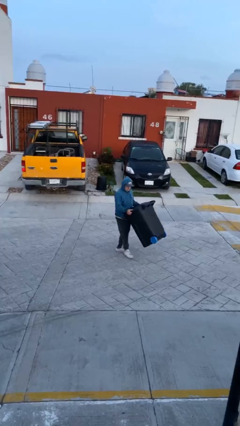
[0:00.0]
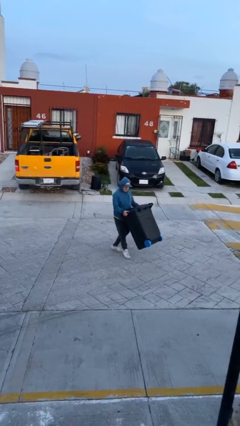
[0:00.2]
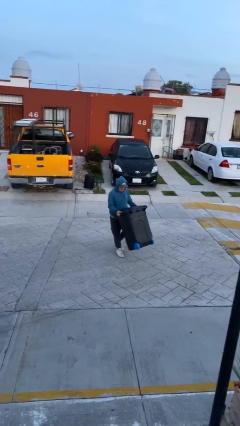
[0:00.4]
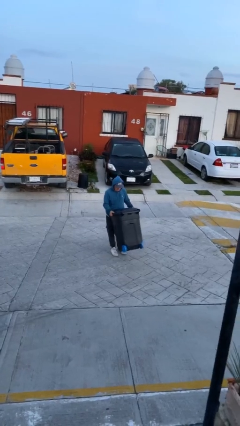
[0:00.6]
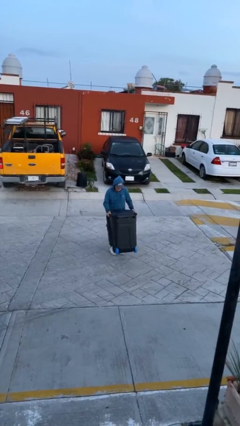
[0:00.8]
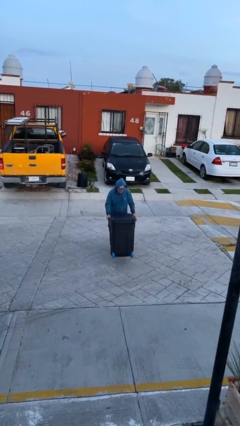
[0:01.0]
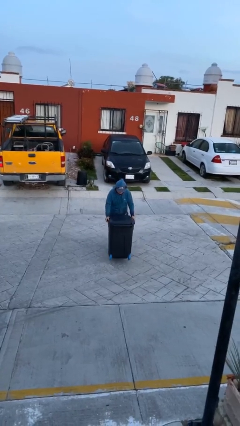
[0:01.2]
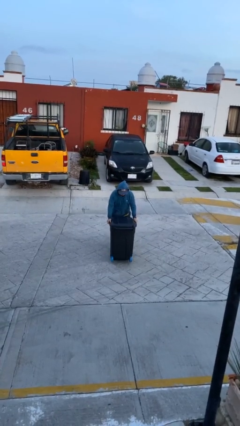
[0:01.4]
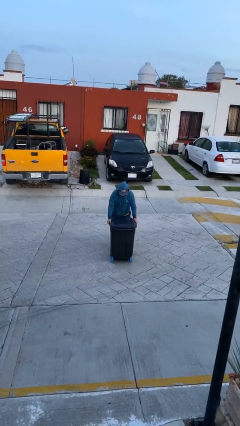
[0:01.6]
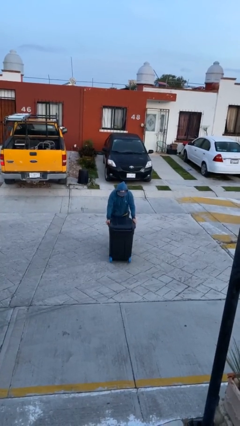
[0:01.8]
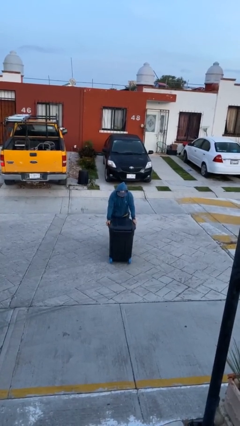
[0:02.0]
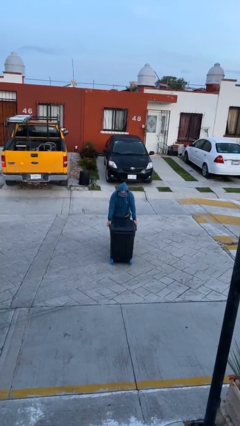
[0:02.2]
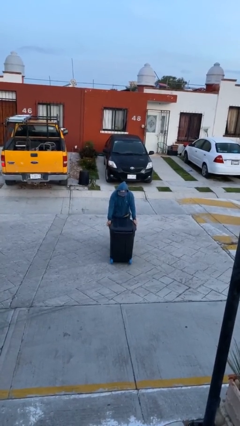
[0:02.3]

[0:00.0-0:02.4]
person puts down object on floor

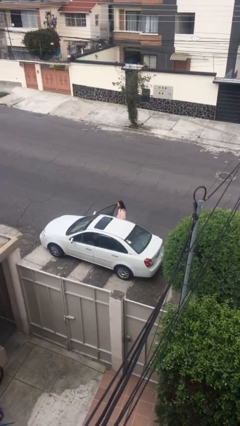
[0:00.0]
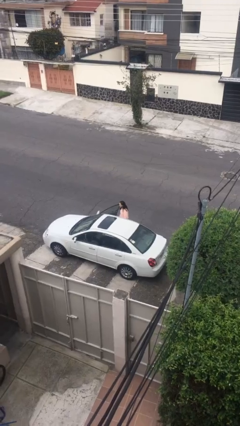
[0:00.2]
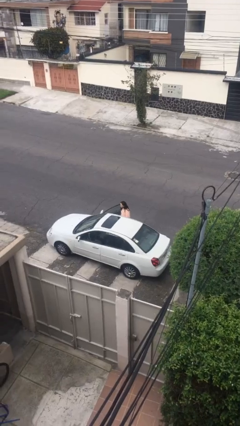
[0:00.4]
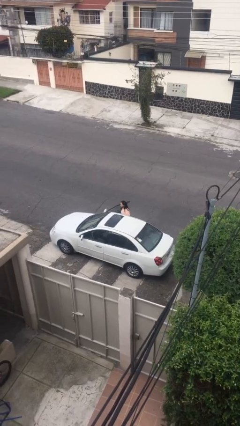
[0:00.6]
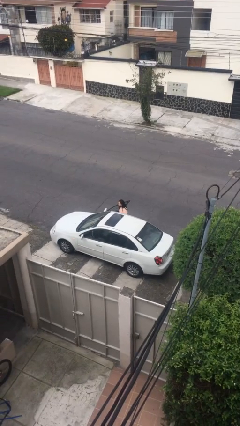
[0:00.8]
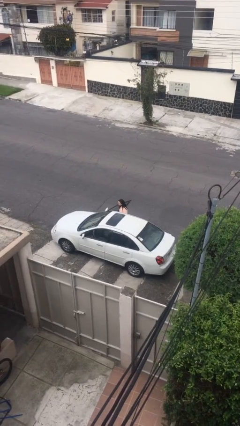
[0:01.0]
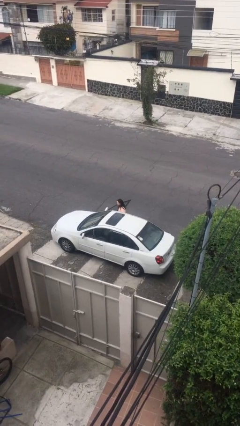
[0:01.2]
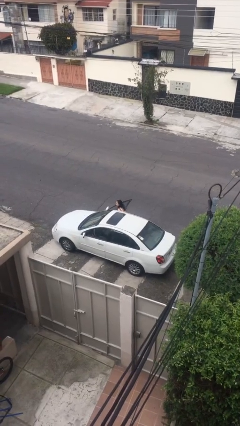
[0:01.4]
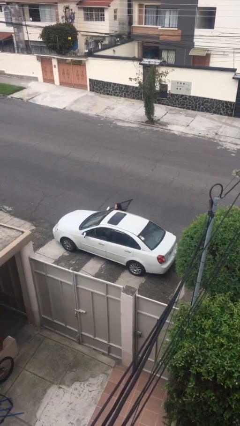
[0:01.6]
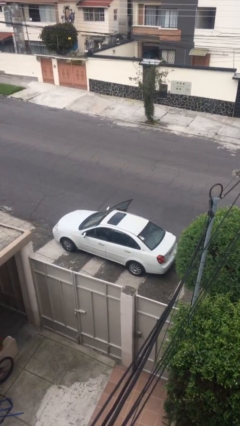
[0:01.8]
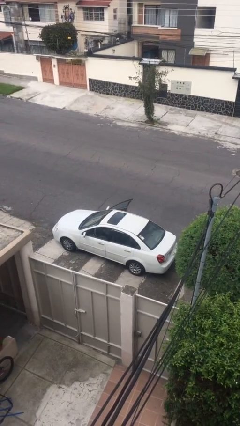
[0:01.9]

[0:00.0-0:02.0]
person enters car

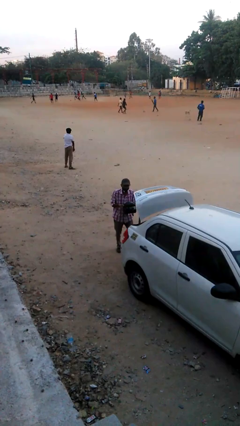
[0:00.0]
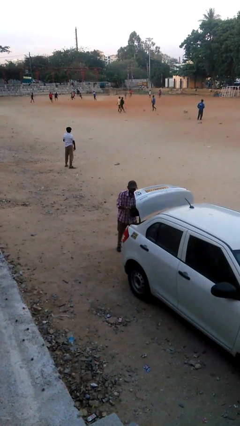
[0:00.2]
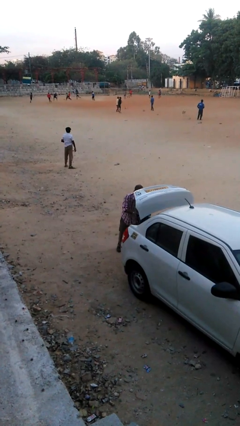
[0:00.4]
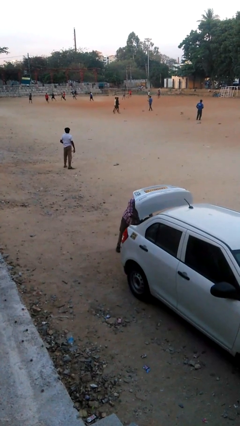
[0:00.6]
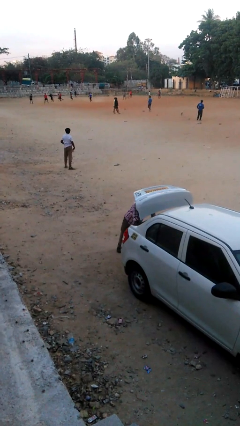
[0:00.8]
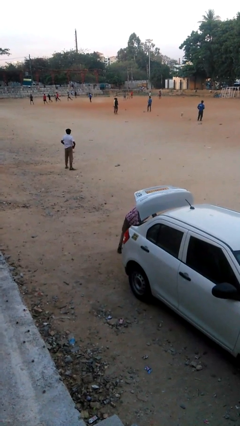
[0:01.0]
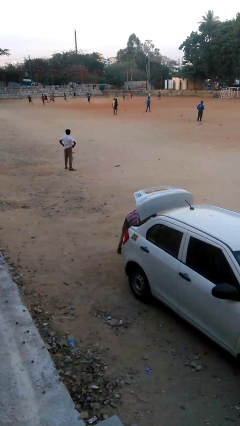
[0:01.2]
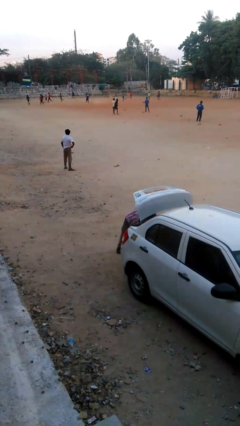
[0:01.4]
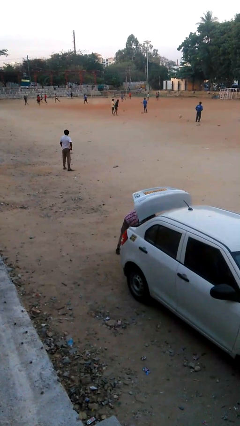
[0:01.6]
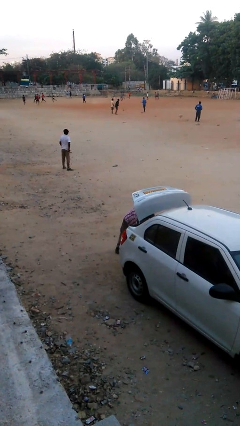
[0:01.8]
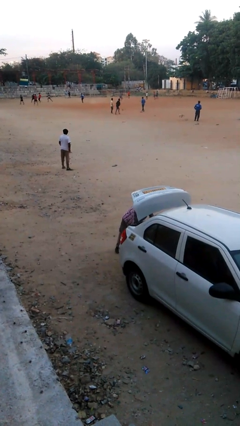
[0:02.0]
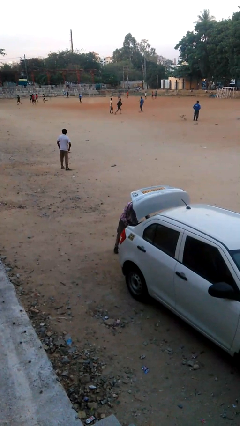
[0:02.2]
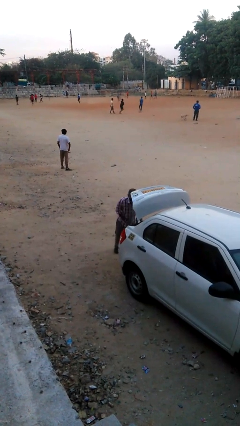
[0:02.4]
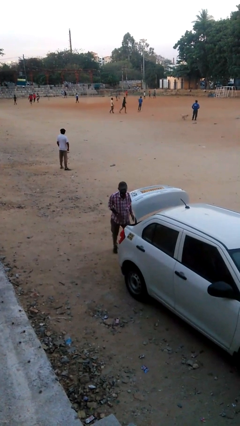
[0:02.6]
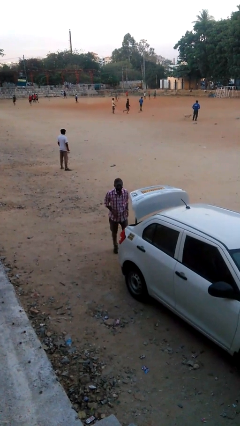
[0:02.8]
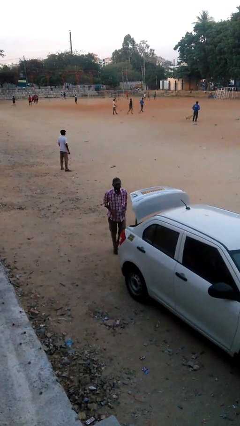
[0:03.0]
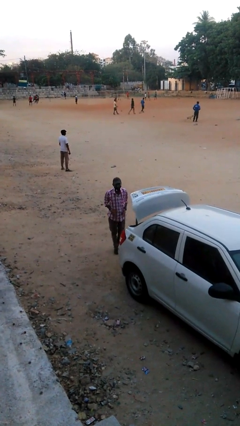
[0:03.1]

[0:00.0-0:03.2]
person loads car

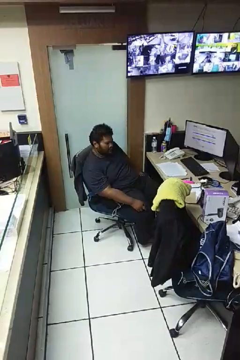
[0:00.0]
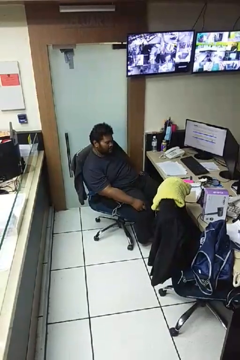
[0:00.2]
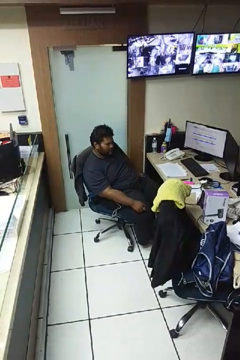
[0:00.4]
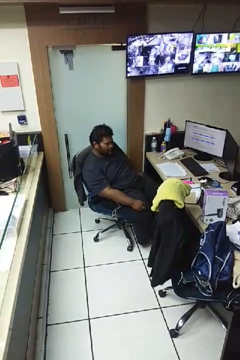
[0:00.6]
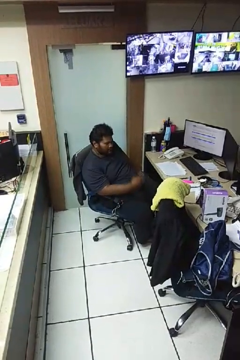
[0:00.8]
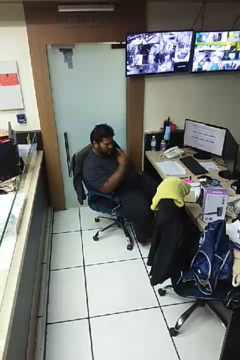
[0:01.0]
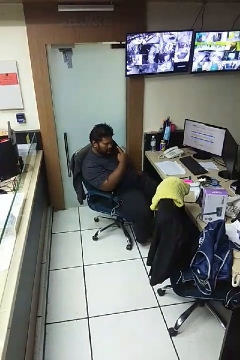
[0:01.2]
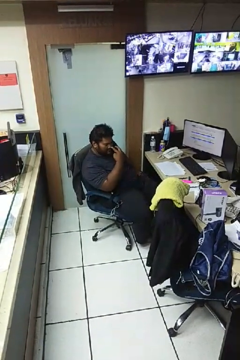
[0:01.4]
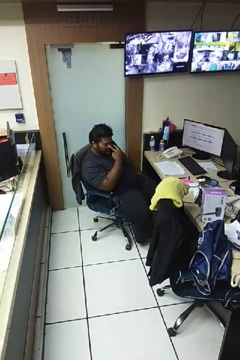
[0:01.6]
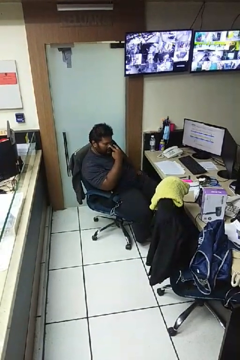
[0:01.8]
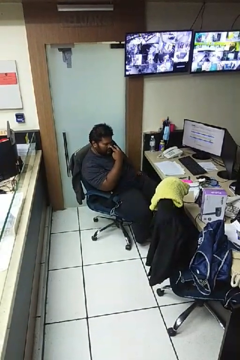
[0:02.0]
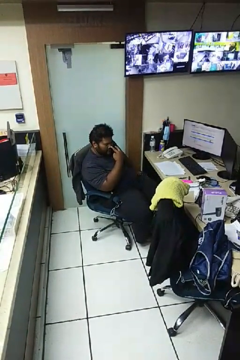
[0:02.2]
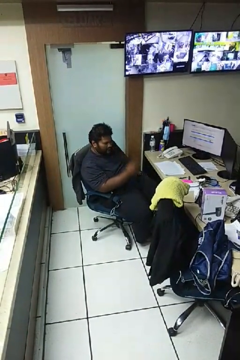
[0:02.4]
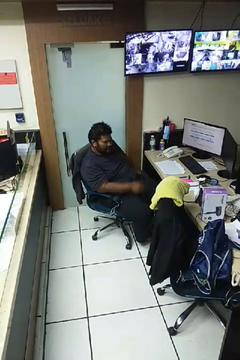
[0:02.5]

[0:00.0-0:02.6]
person gestures watch closely

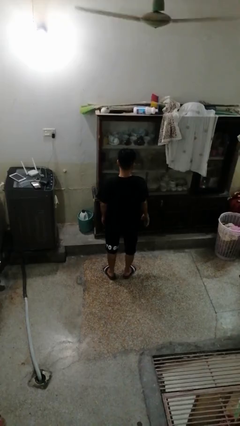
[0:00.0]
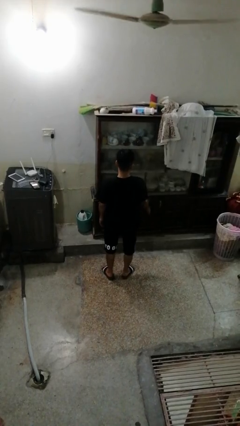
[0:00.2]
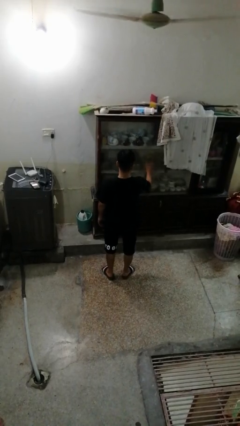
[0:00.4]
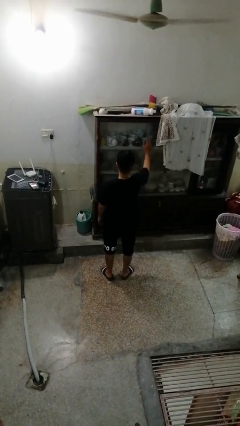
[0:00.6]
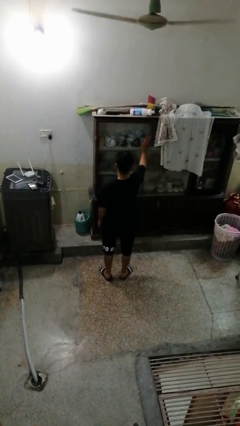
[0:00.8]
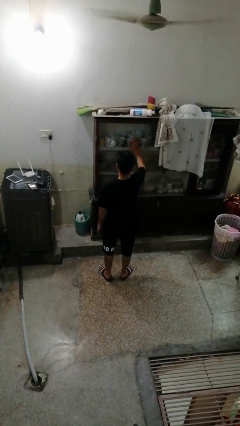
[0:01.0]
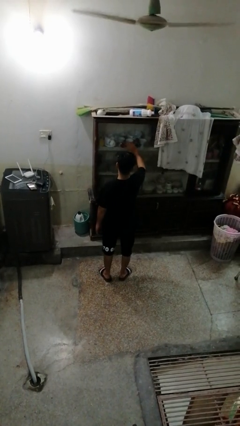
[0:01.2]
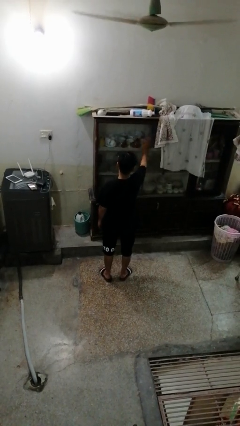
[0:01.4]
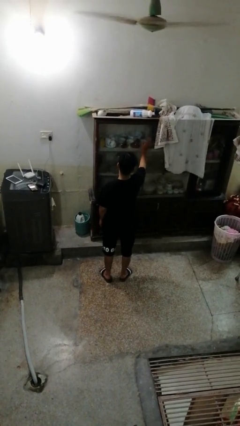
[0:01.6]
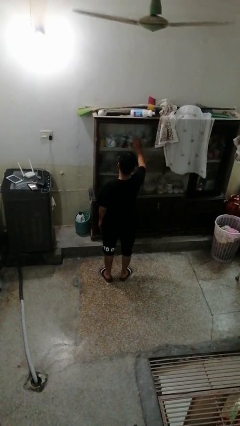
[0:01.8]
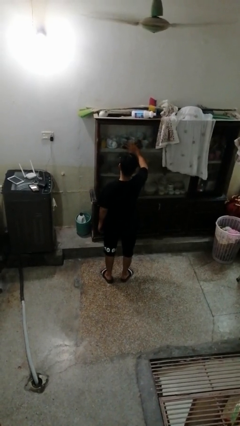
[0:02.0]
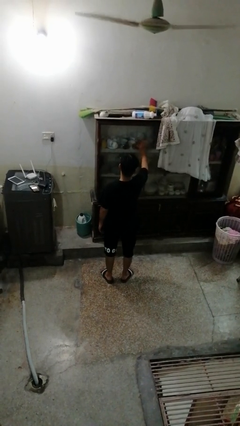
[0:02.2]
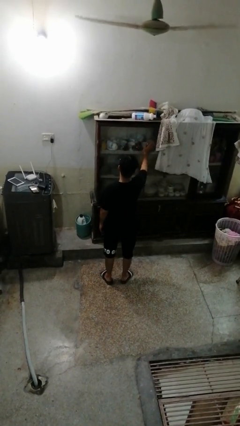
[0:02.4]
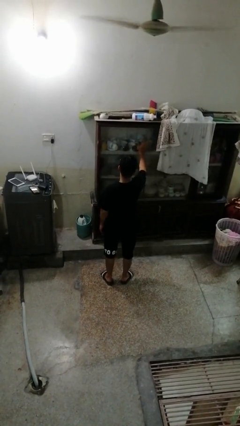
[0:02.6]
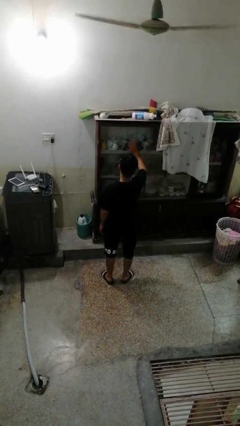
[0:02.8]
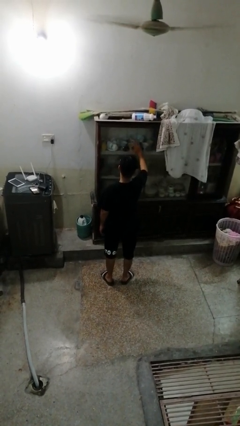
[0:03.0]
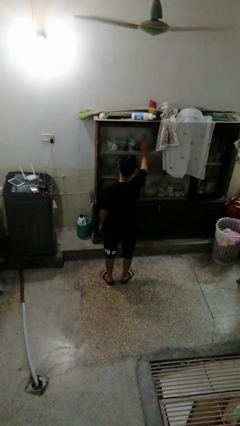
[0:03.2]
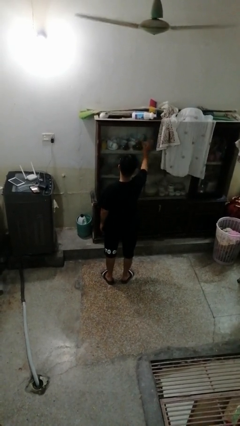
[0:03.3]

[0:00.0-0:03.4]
person waves hand over object

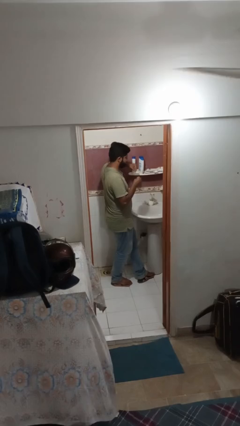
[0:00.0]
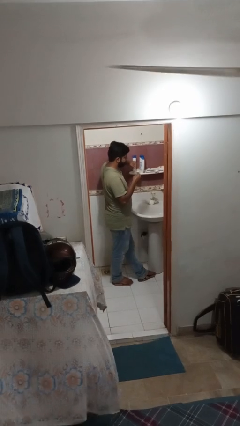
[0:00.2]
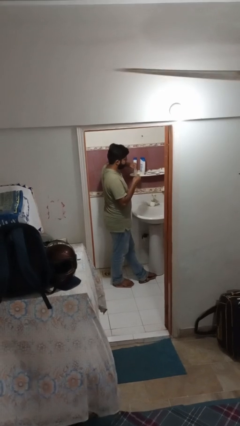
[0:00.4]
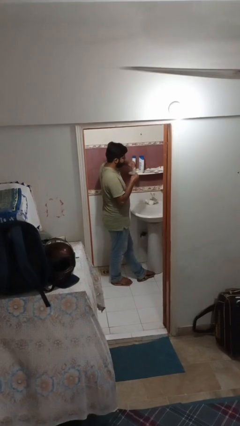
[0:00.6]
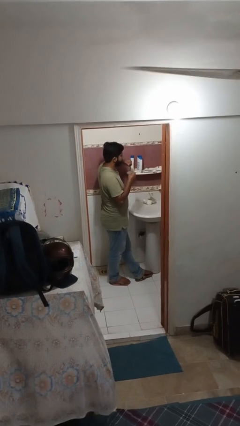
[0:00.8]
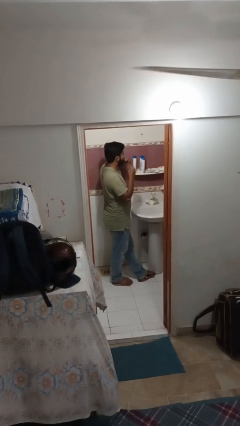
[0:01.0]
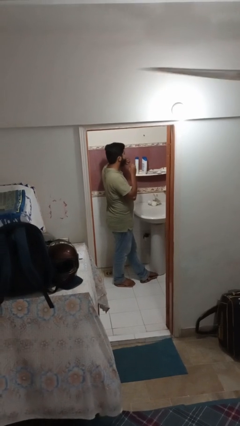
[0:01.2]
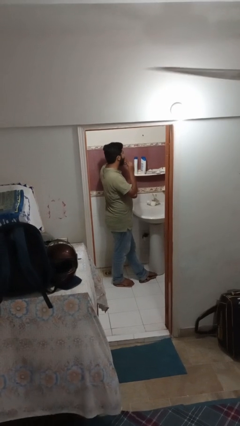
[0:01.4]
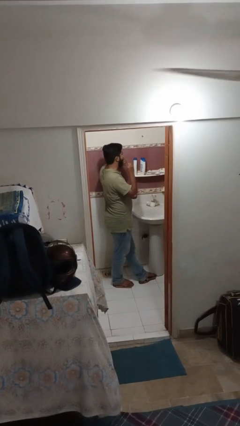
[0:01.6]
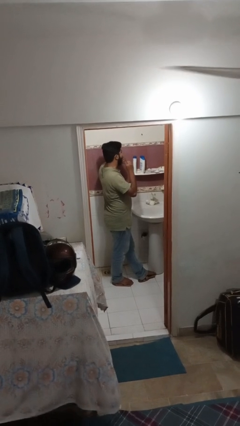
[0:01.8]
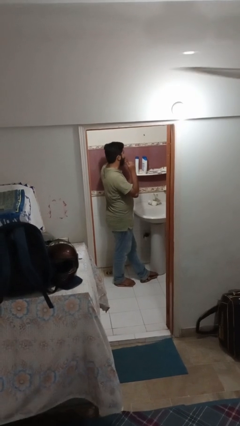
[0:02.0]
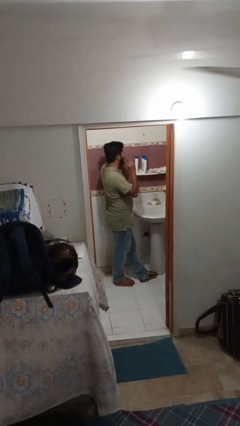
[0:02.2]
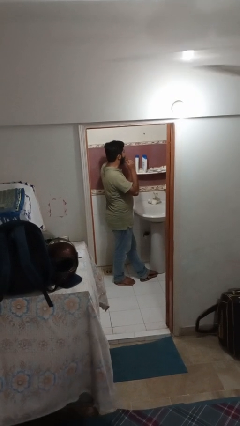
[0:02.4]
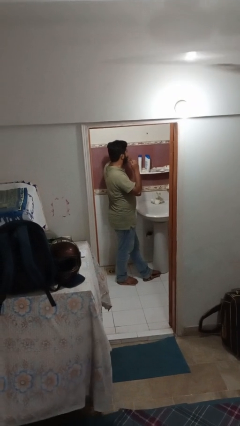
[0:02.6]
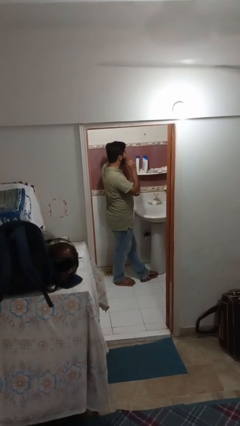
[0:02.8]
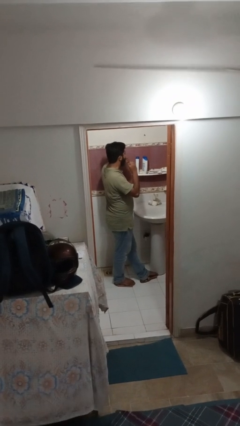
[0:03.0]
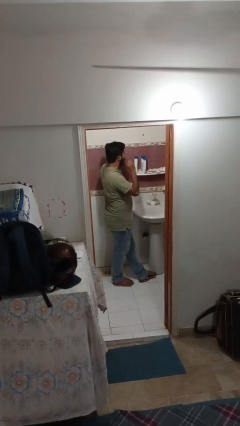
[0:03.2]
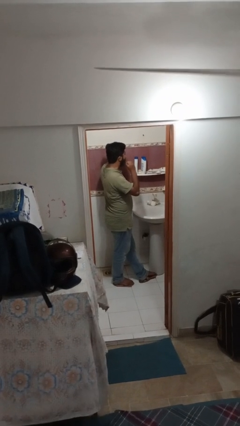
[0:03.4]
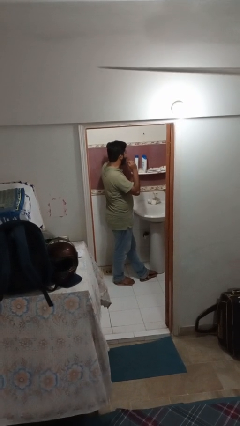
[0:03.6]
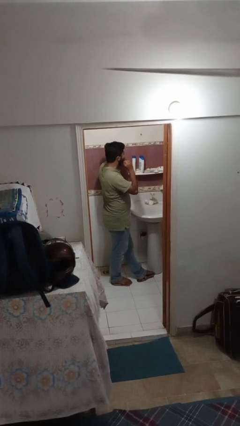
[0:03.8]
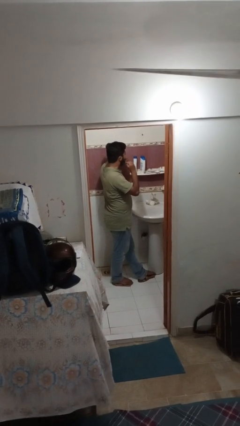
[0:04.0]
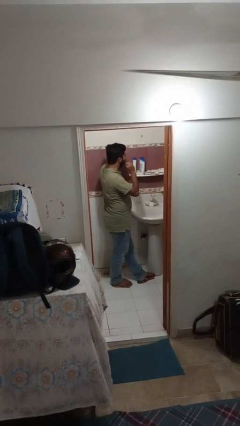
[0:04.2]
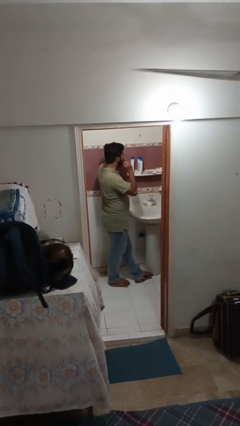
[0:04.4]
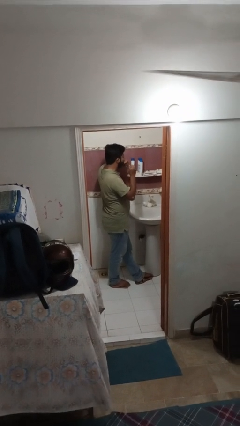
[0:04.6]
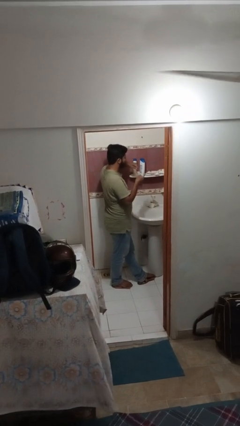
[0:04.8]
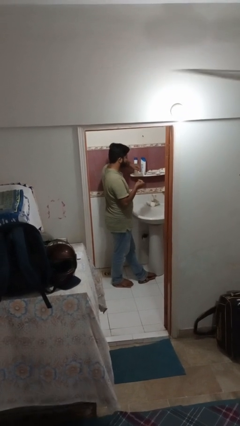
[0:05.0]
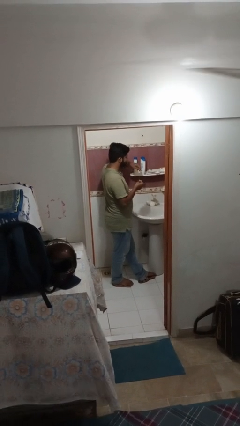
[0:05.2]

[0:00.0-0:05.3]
person flosses
